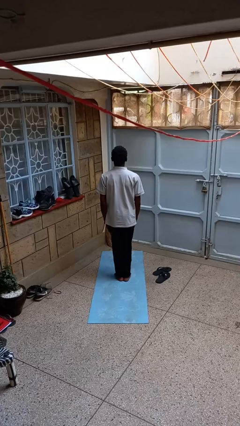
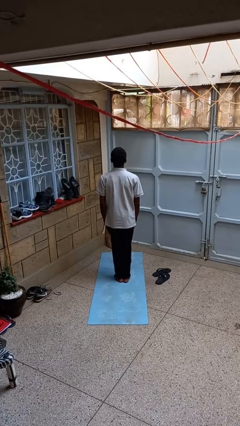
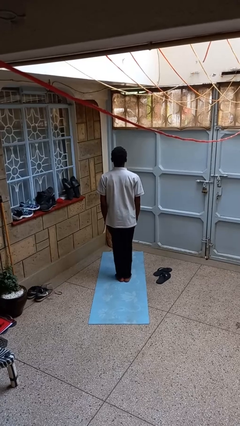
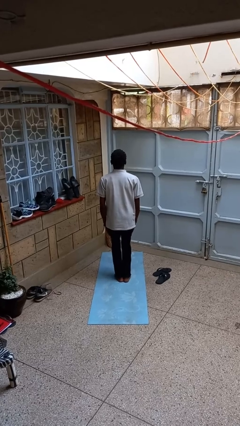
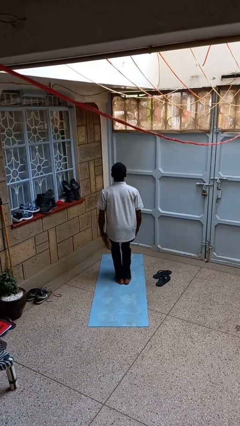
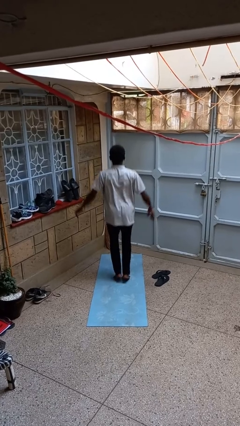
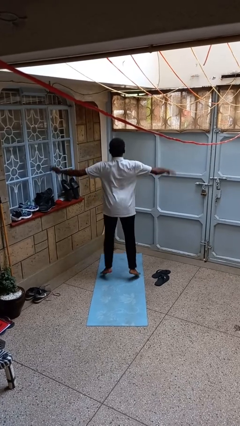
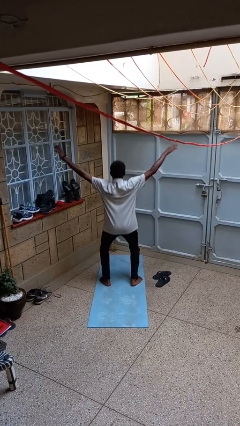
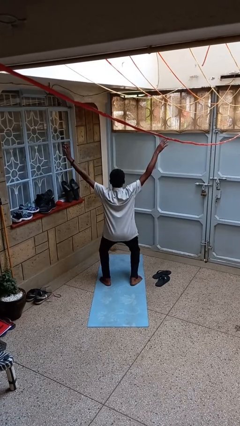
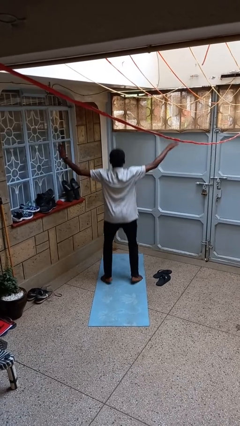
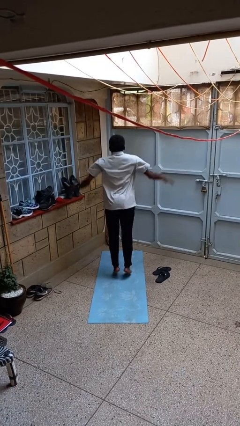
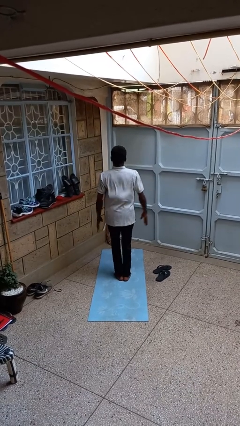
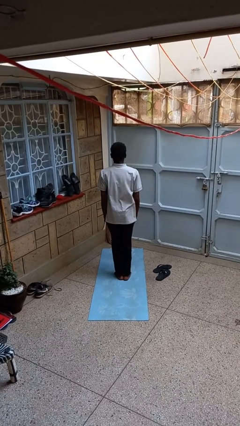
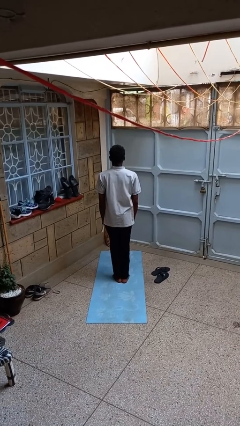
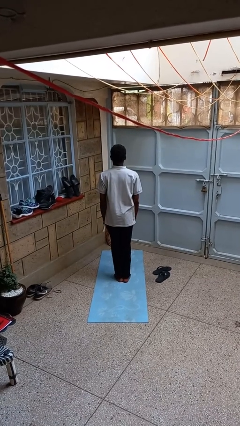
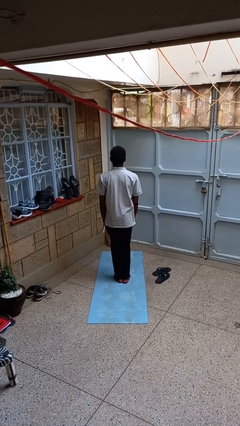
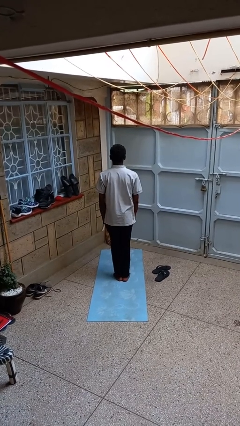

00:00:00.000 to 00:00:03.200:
person exercises with jumping jacks

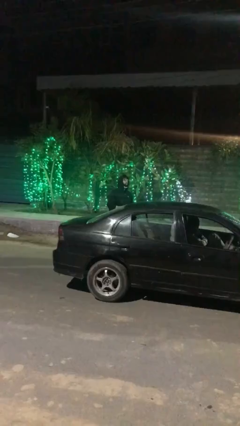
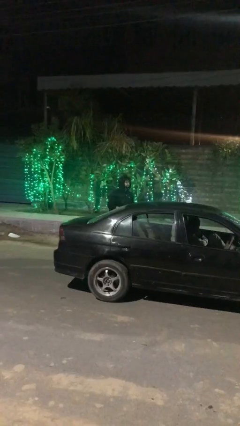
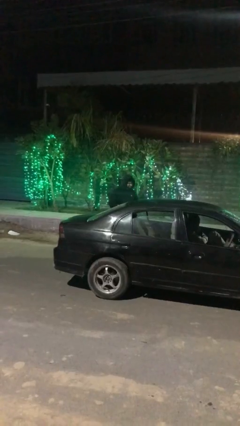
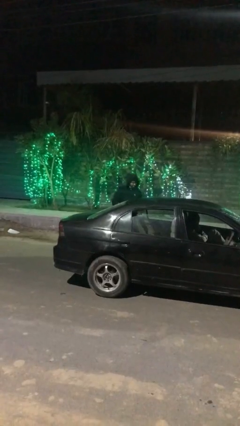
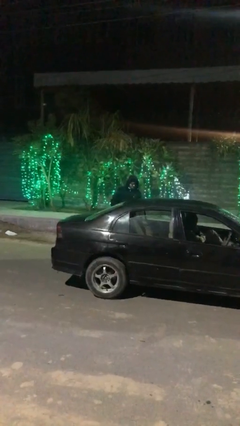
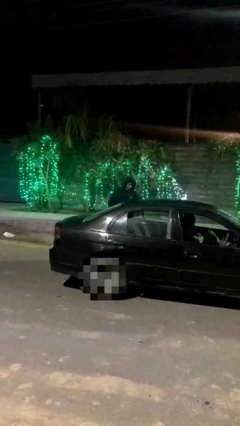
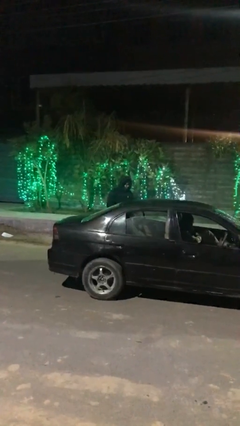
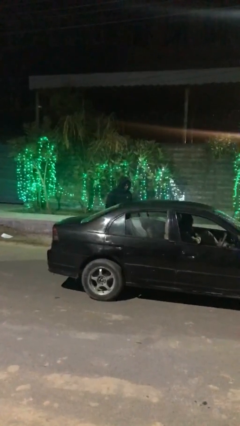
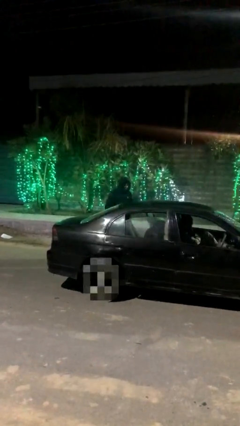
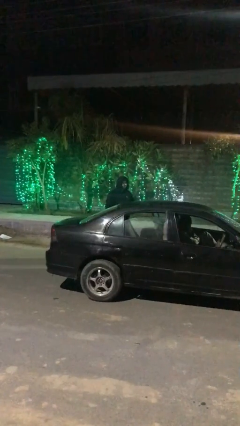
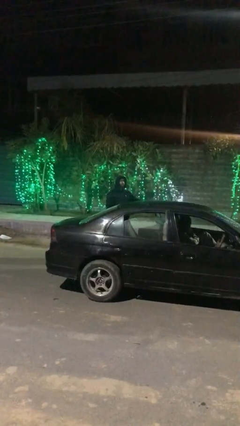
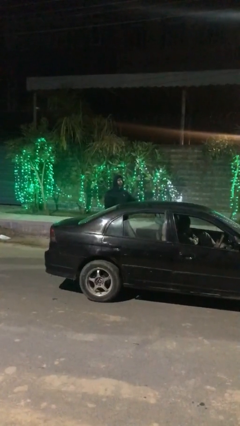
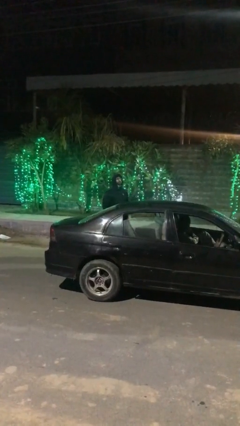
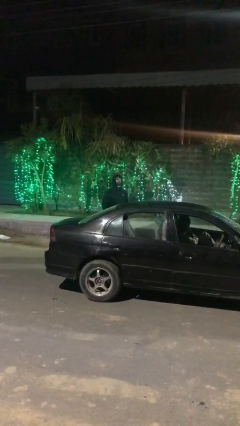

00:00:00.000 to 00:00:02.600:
person opens car door

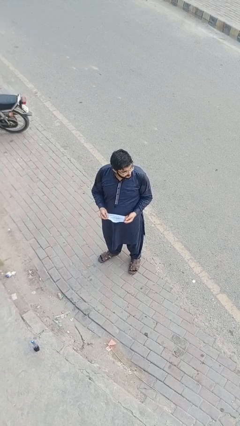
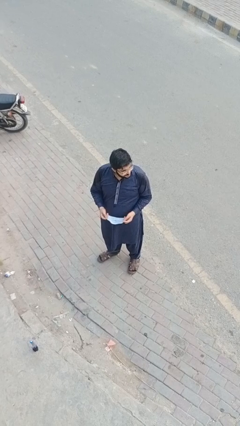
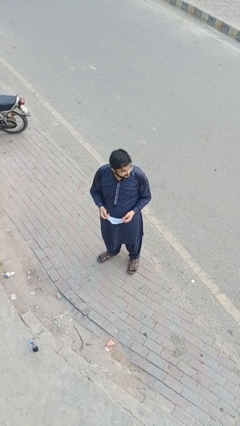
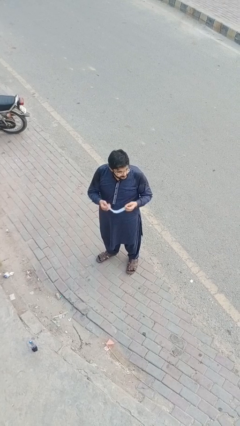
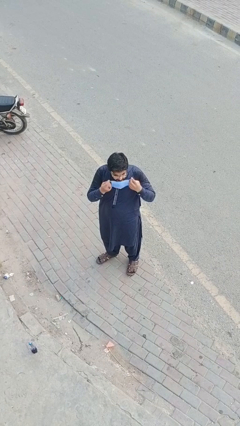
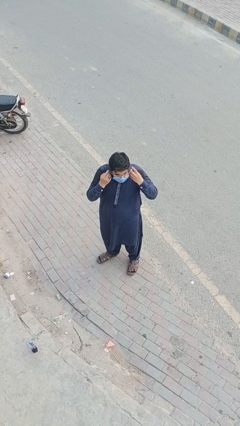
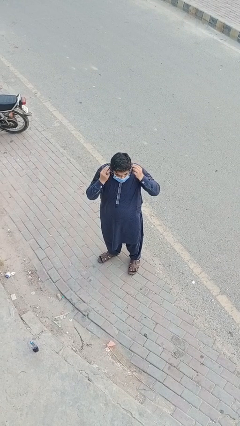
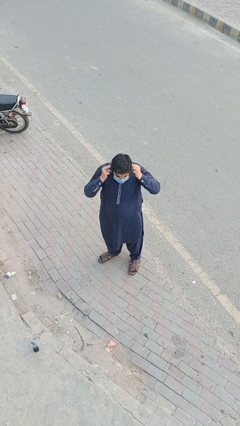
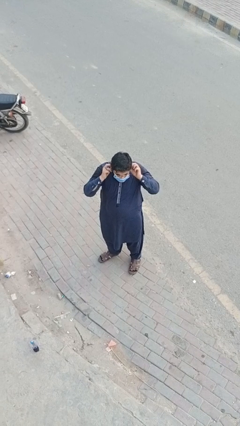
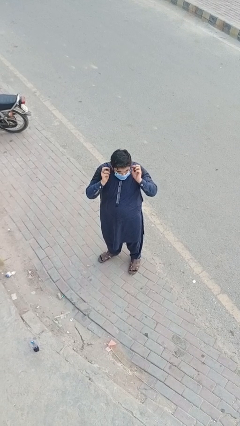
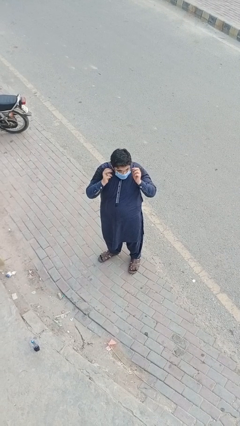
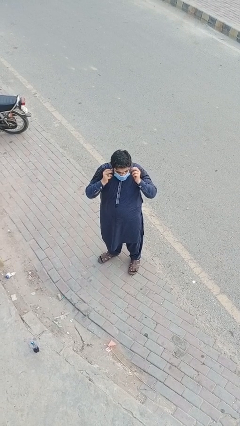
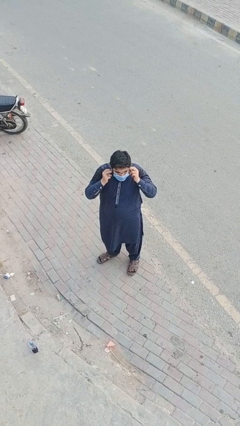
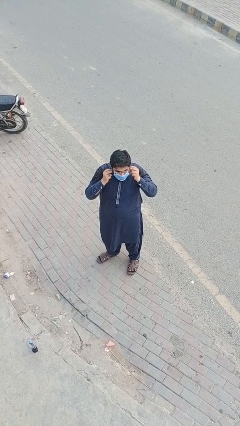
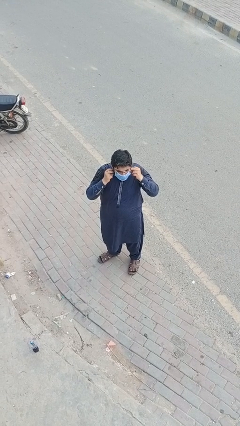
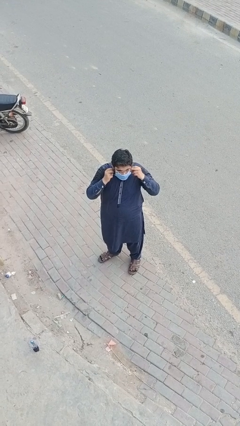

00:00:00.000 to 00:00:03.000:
person puts on facemask

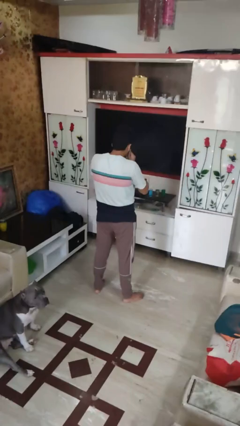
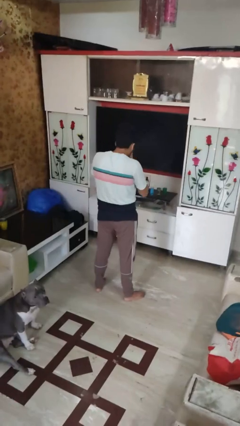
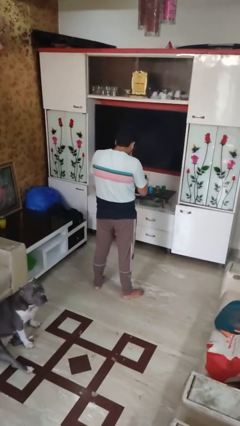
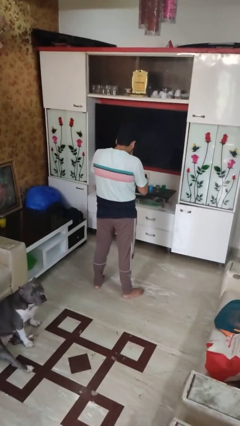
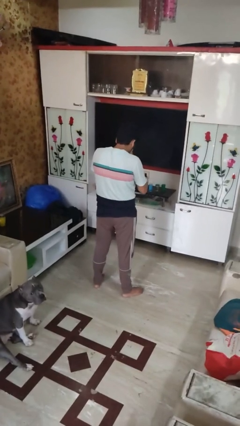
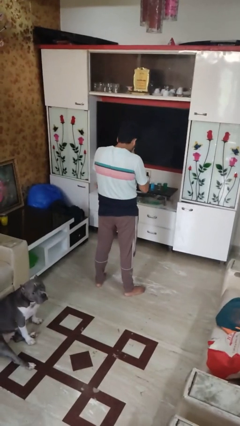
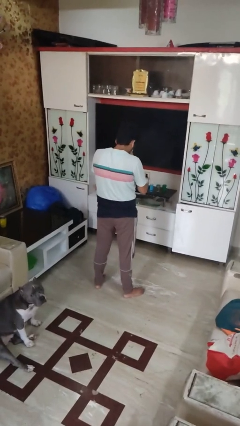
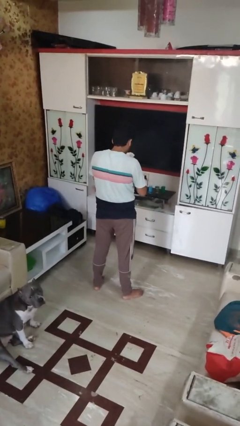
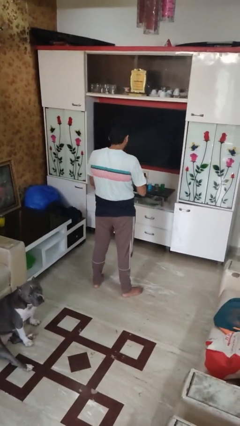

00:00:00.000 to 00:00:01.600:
person blows nose

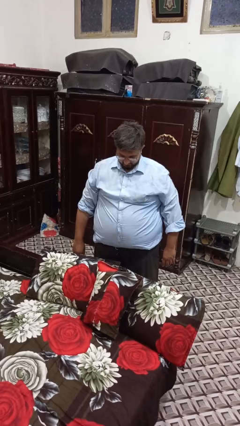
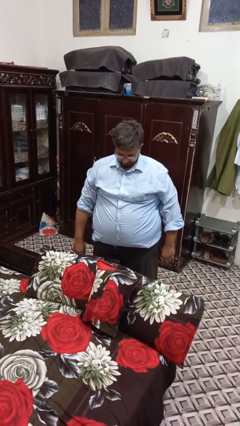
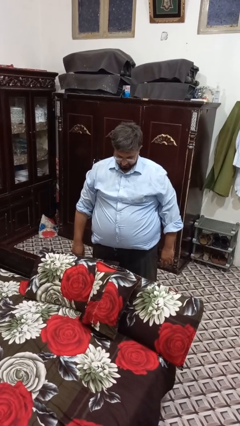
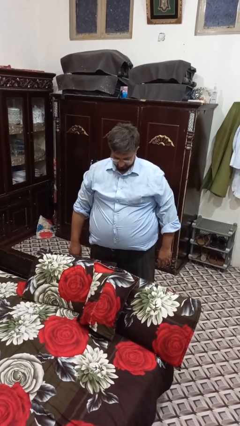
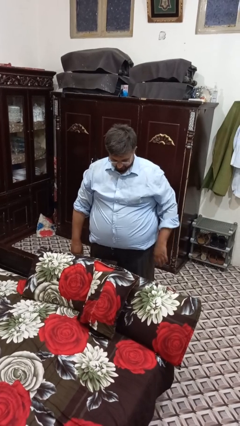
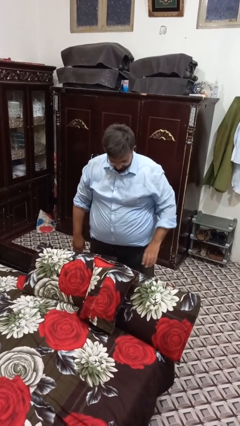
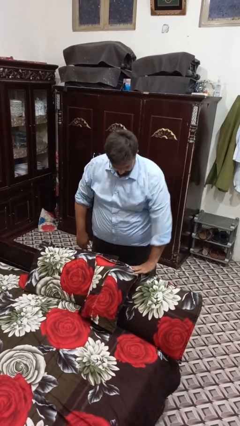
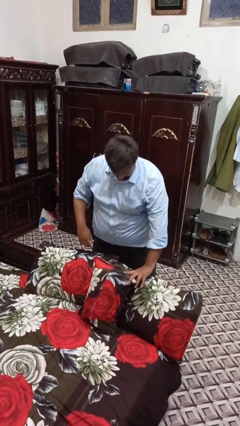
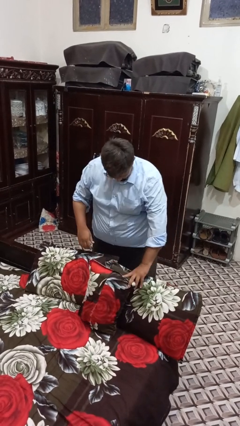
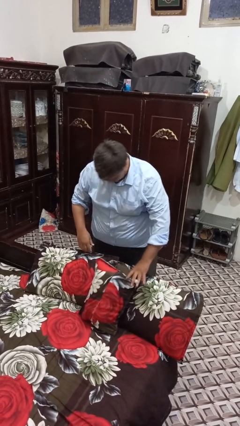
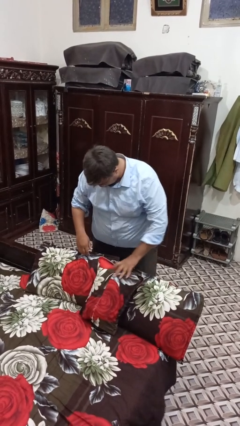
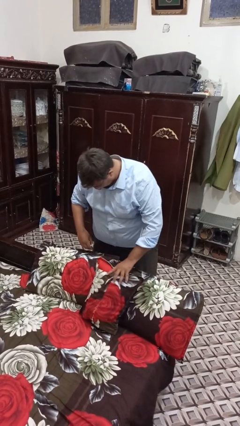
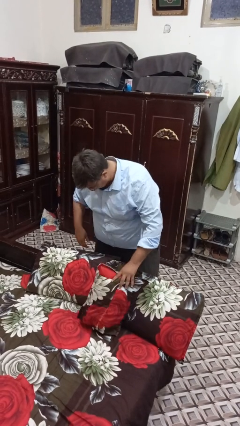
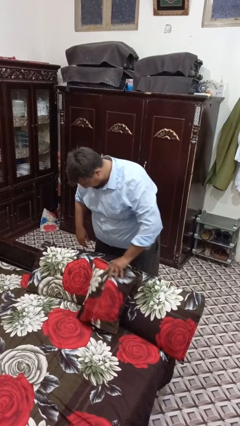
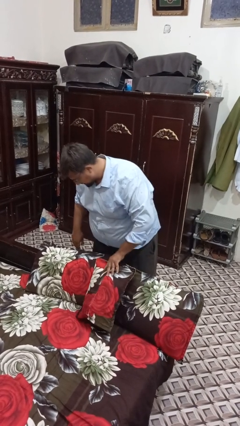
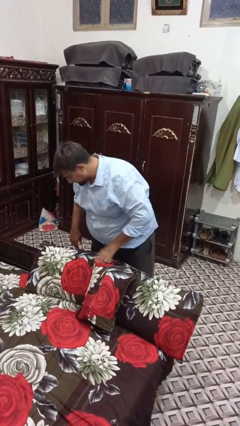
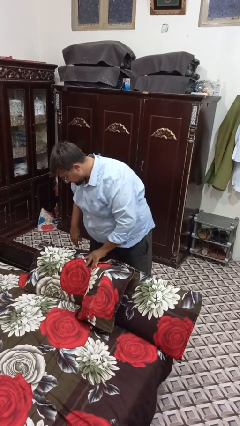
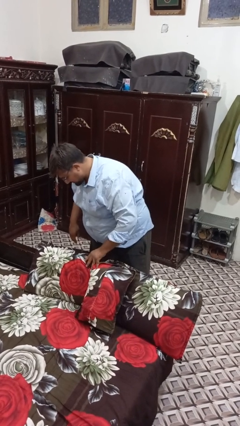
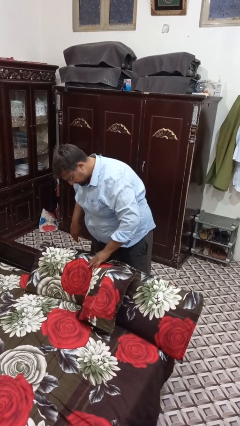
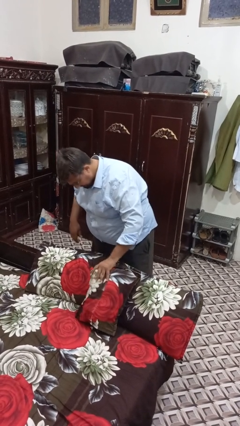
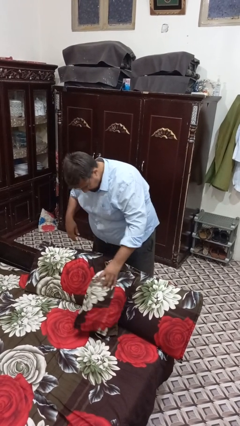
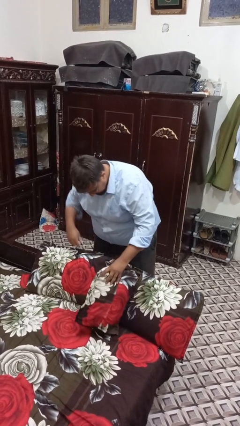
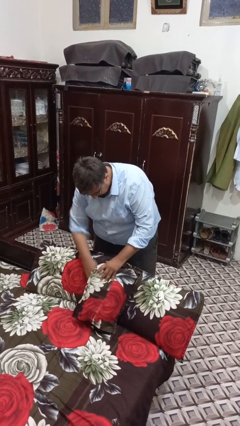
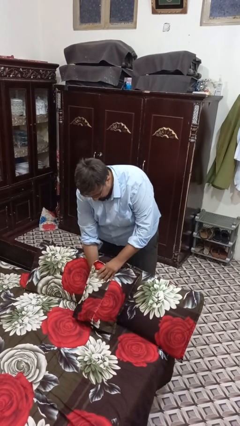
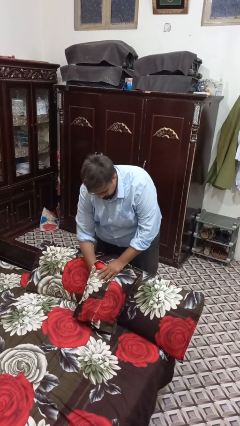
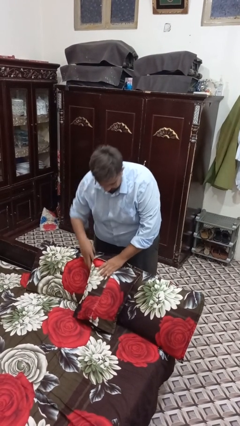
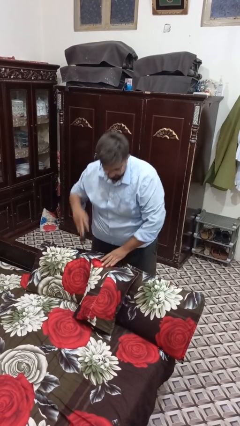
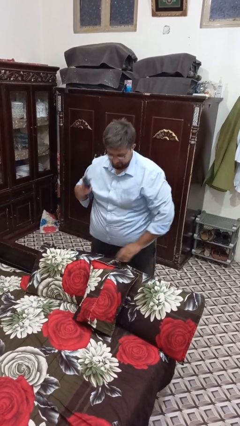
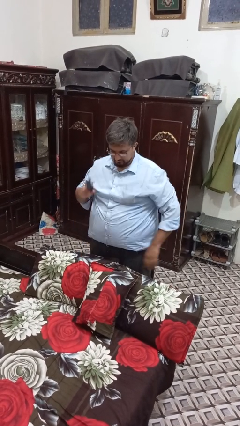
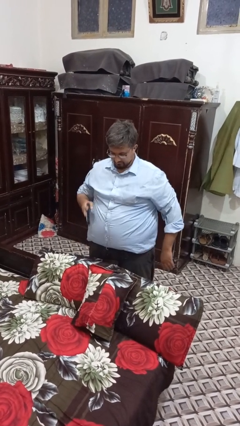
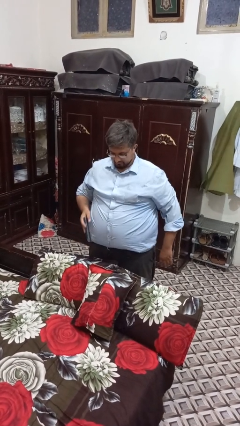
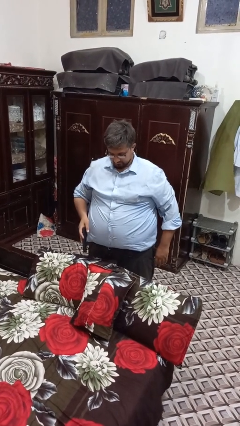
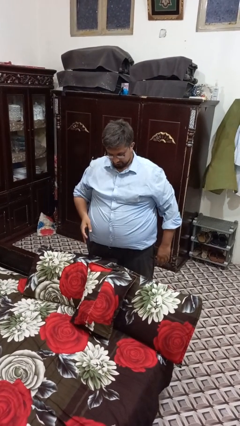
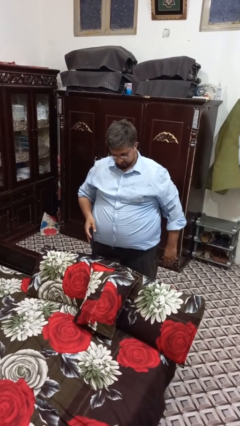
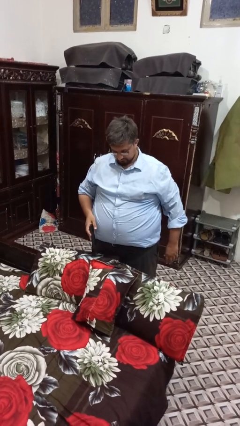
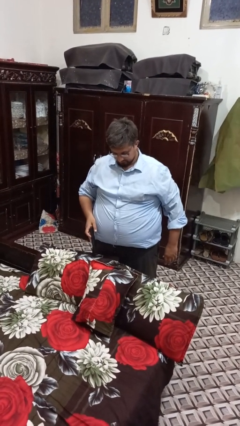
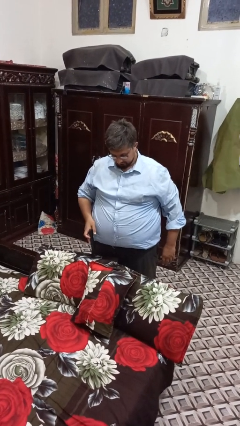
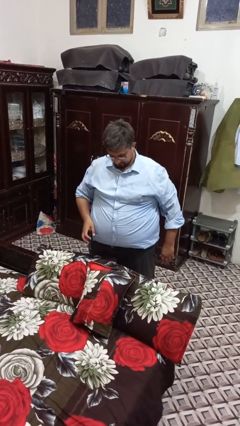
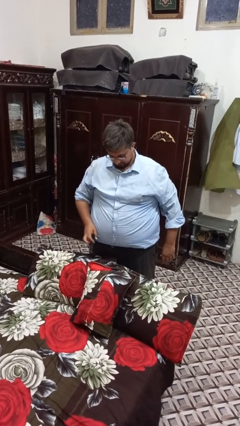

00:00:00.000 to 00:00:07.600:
person searches in couch
